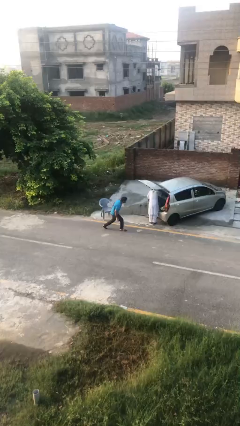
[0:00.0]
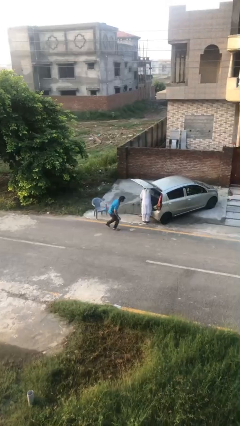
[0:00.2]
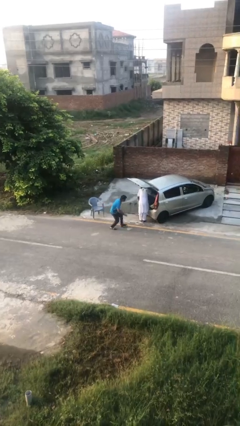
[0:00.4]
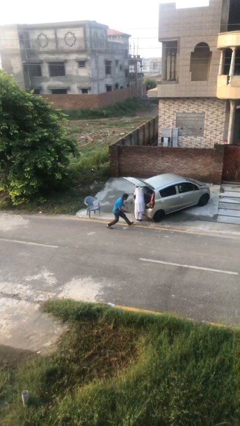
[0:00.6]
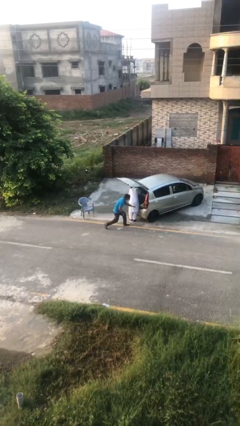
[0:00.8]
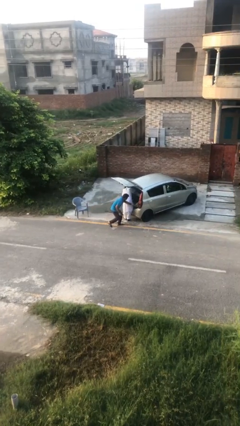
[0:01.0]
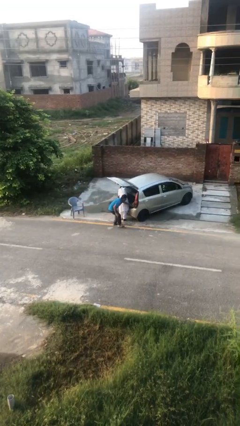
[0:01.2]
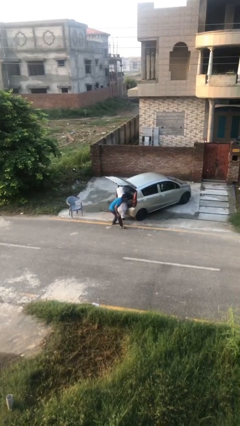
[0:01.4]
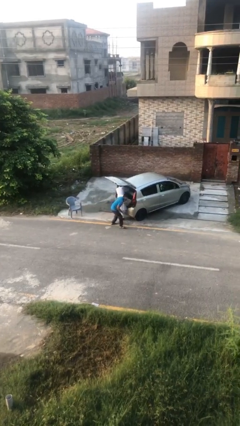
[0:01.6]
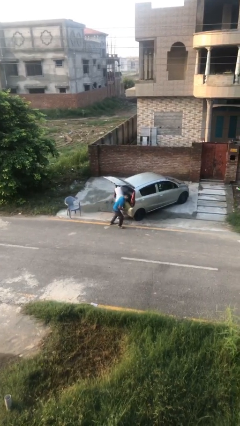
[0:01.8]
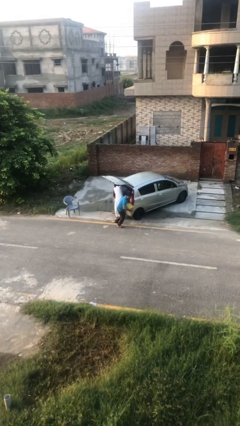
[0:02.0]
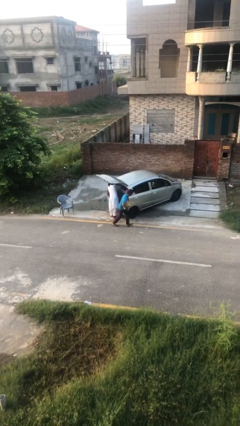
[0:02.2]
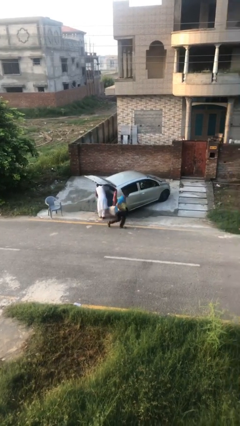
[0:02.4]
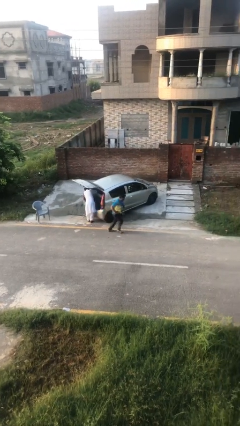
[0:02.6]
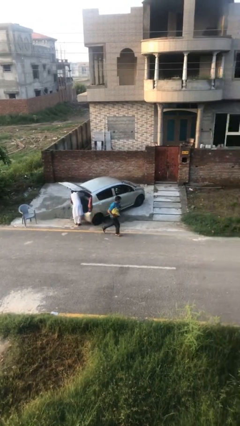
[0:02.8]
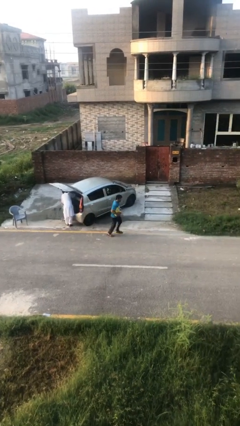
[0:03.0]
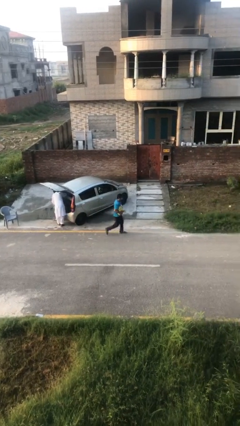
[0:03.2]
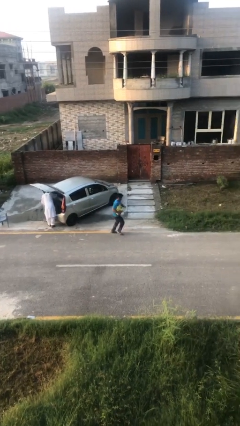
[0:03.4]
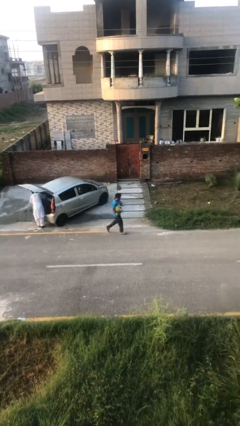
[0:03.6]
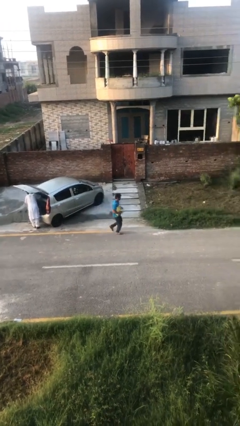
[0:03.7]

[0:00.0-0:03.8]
person steals object from person

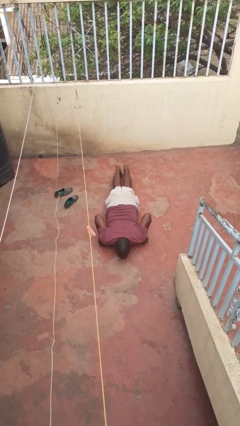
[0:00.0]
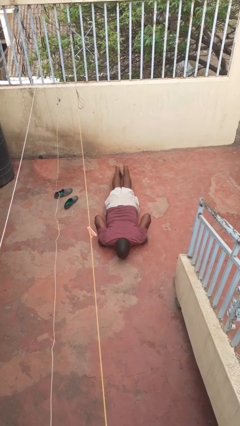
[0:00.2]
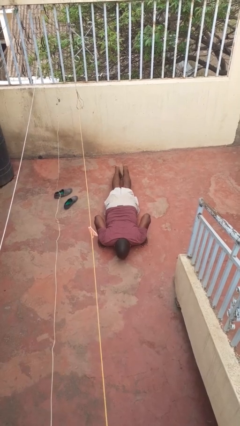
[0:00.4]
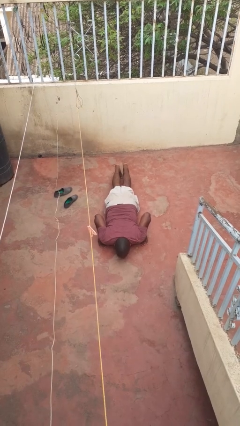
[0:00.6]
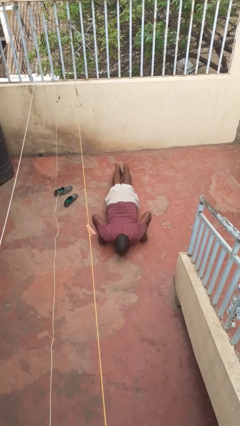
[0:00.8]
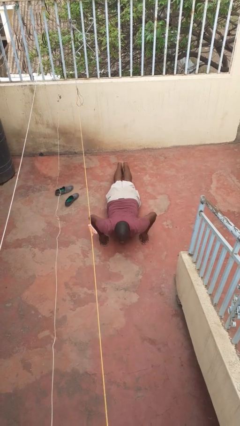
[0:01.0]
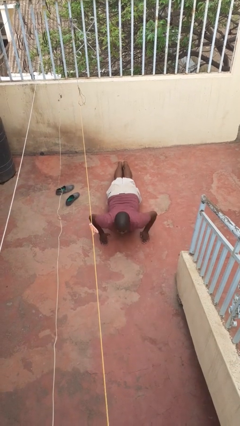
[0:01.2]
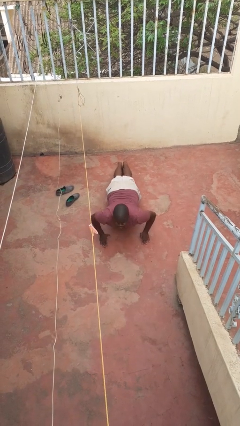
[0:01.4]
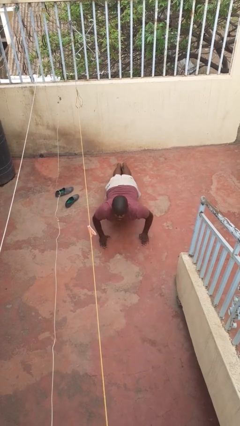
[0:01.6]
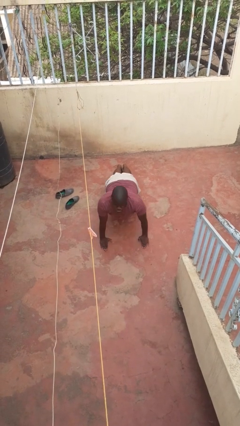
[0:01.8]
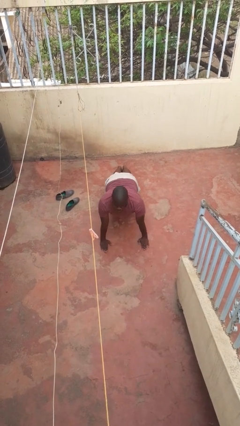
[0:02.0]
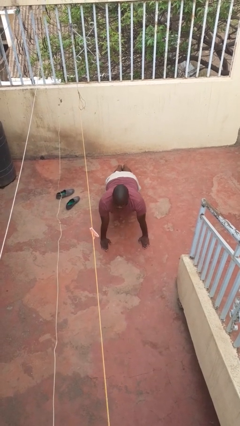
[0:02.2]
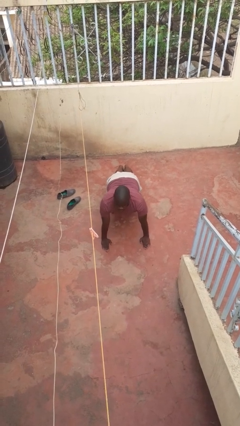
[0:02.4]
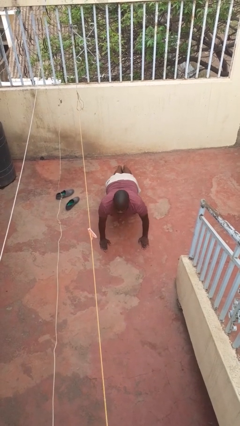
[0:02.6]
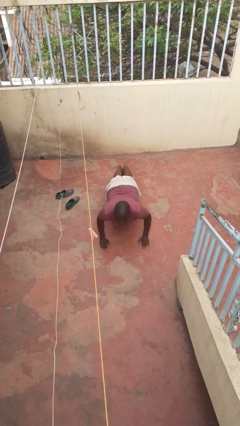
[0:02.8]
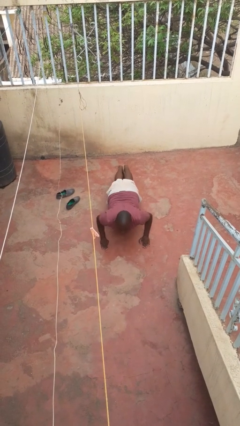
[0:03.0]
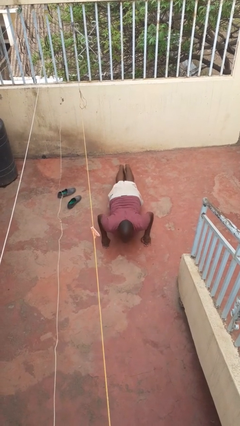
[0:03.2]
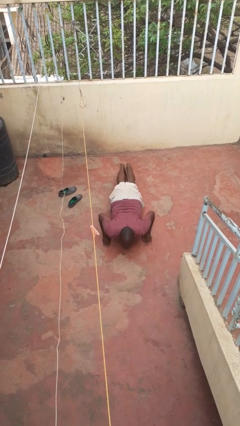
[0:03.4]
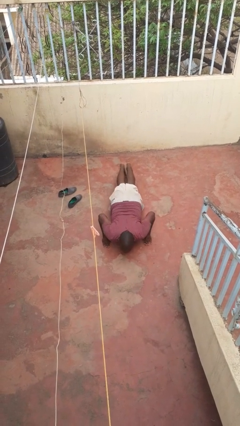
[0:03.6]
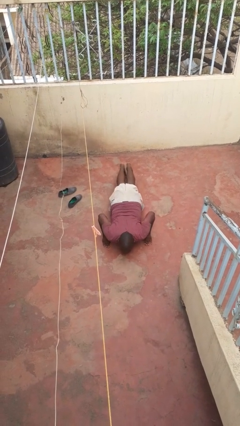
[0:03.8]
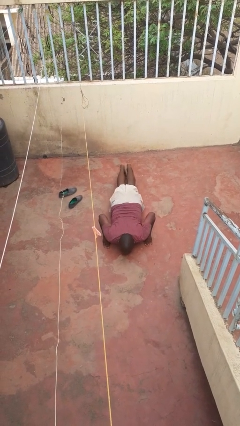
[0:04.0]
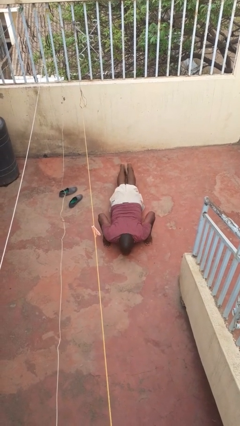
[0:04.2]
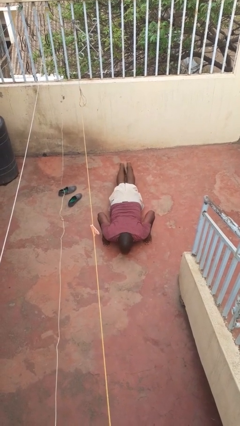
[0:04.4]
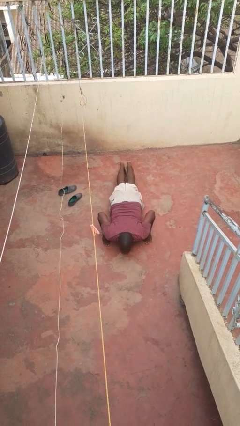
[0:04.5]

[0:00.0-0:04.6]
person exercises with pushup

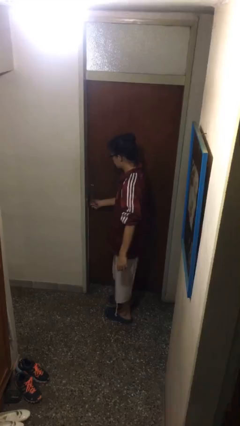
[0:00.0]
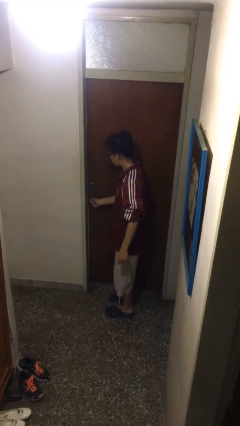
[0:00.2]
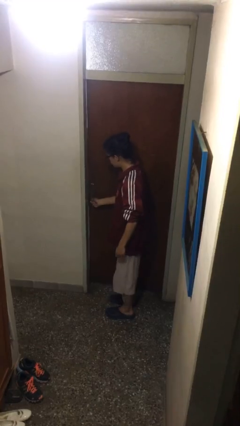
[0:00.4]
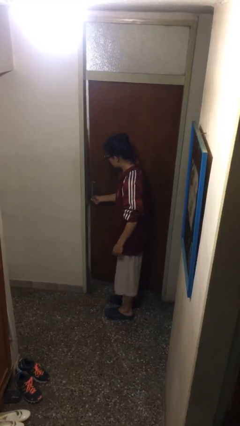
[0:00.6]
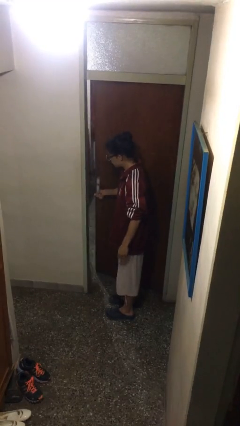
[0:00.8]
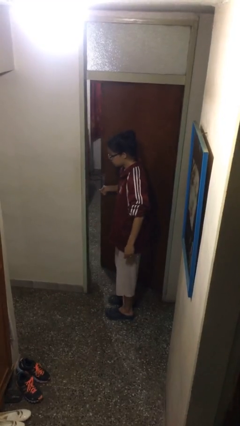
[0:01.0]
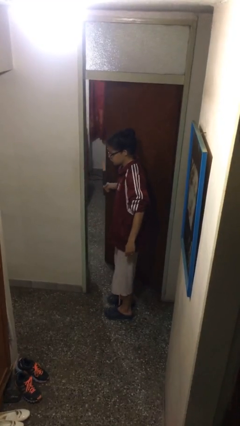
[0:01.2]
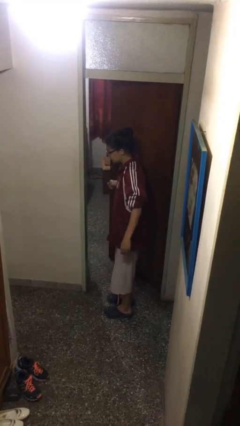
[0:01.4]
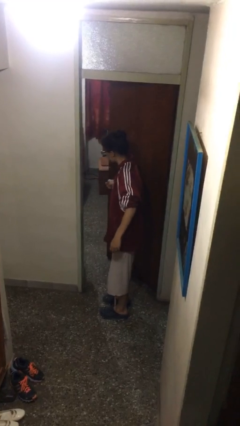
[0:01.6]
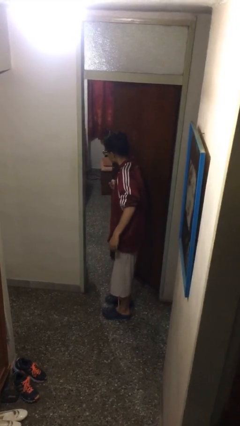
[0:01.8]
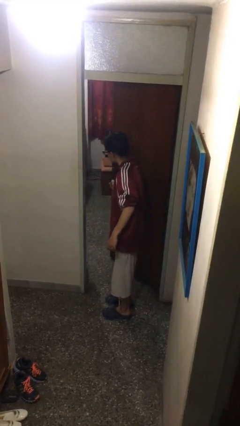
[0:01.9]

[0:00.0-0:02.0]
person opens facility door

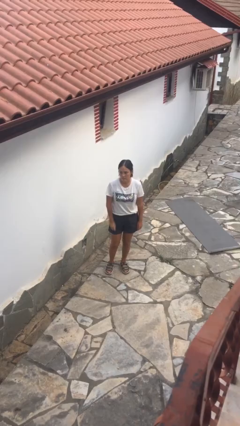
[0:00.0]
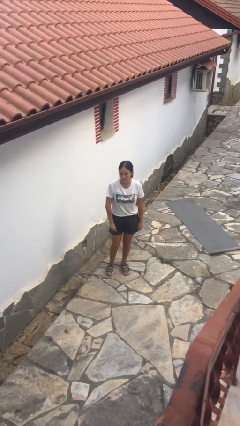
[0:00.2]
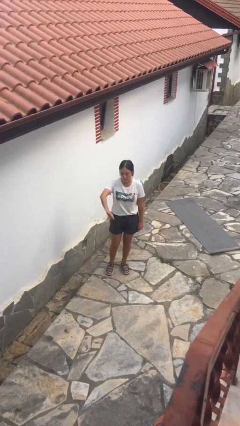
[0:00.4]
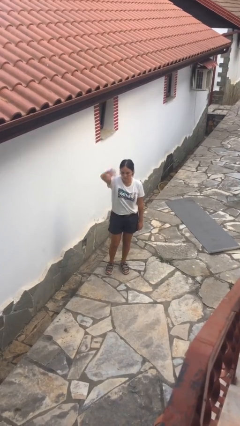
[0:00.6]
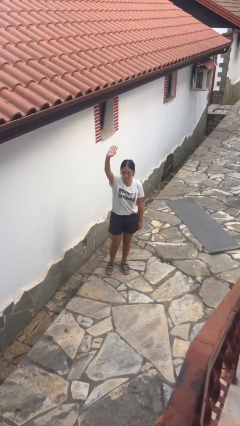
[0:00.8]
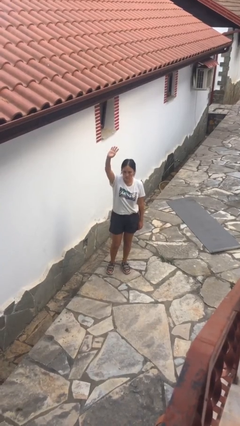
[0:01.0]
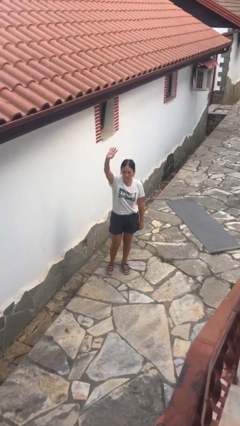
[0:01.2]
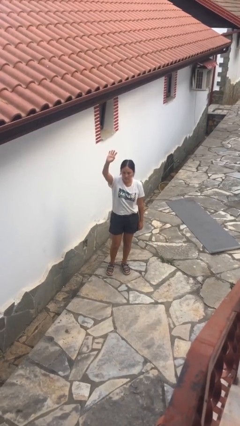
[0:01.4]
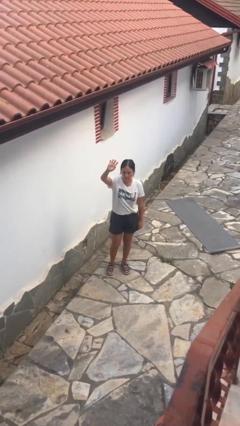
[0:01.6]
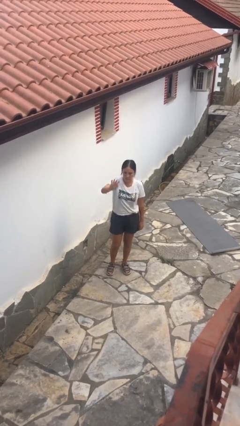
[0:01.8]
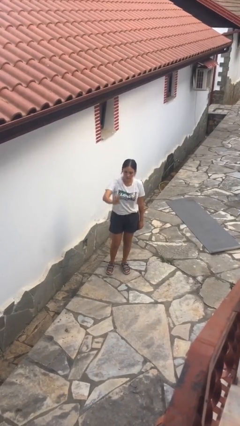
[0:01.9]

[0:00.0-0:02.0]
person gestures swipe up

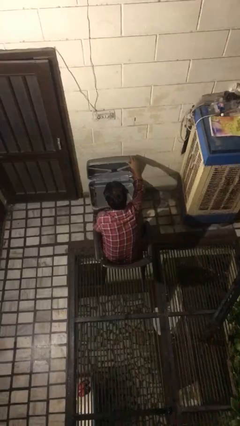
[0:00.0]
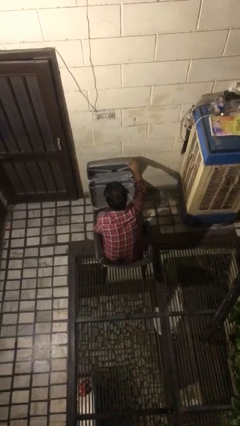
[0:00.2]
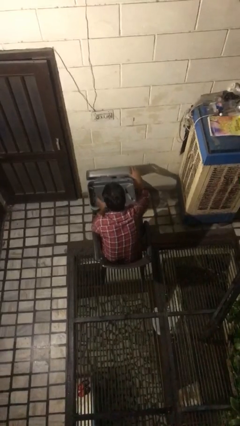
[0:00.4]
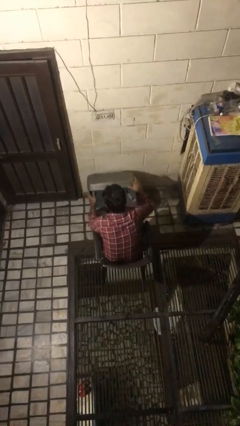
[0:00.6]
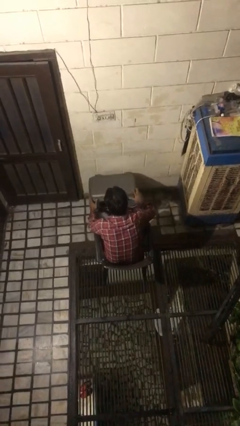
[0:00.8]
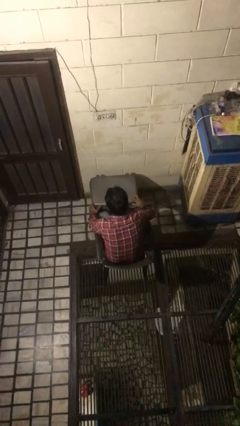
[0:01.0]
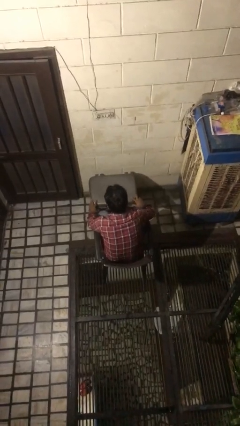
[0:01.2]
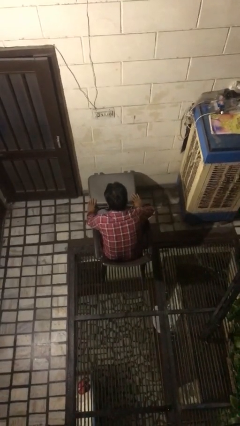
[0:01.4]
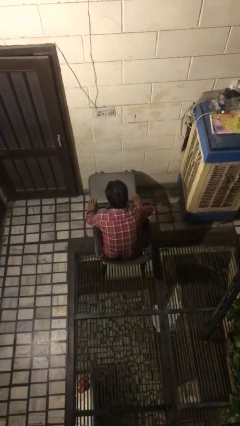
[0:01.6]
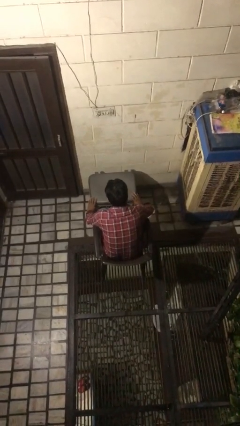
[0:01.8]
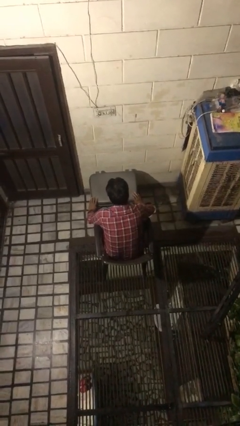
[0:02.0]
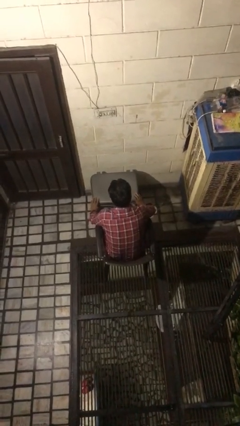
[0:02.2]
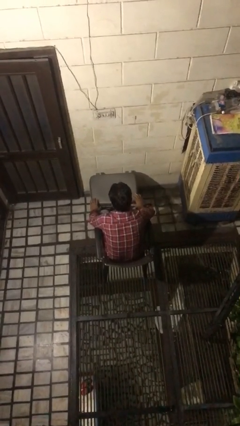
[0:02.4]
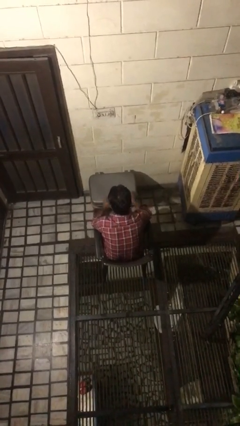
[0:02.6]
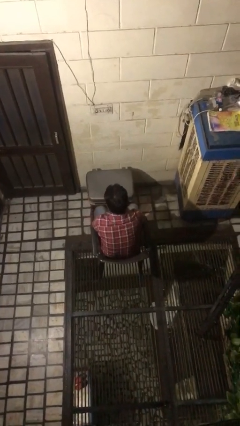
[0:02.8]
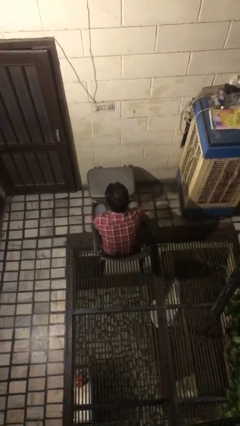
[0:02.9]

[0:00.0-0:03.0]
person closes suitcase

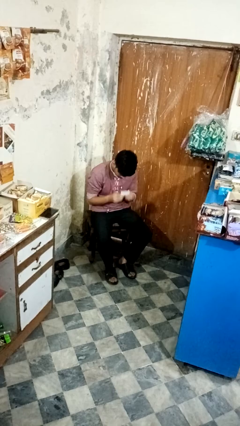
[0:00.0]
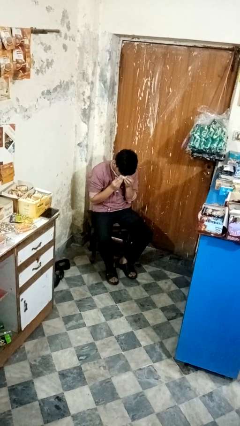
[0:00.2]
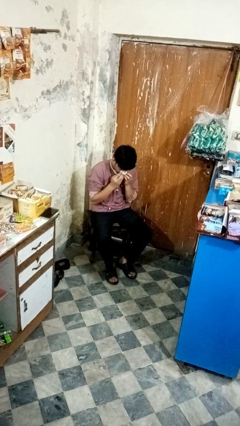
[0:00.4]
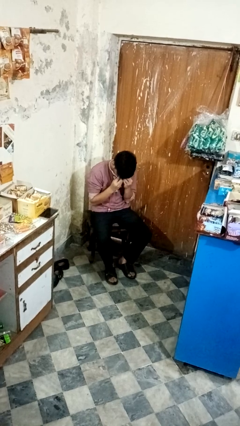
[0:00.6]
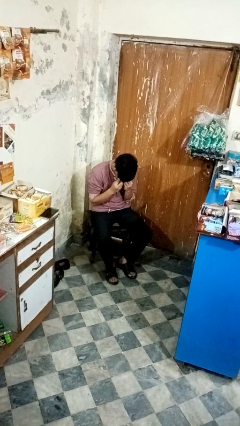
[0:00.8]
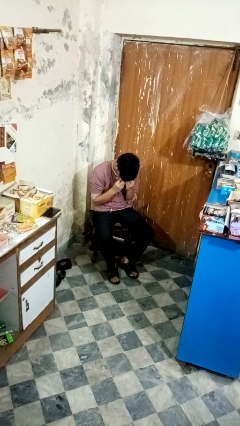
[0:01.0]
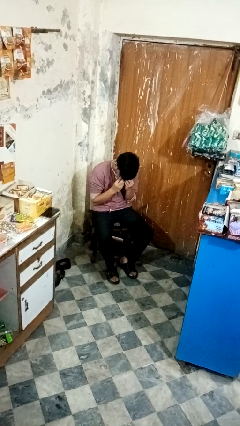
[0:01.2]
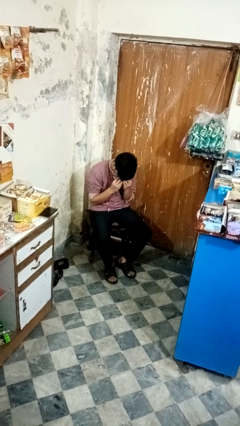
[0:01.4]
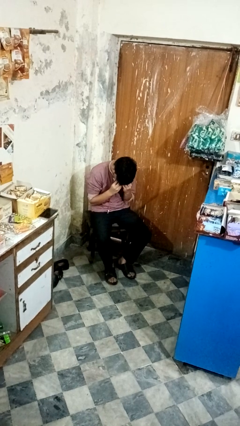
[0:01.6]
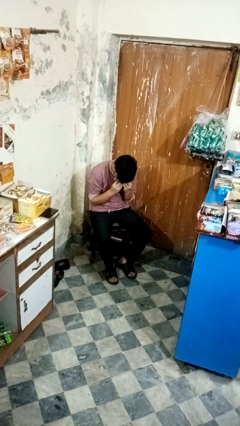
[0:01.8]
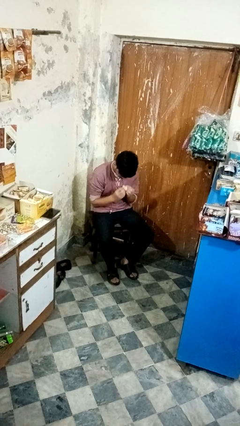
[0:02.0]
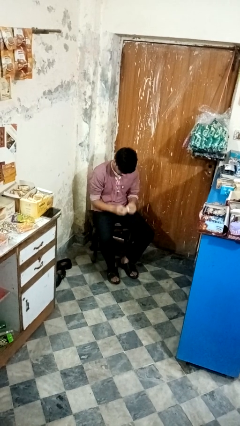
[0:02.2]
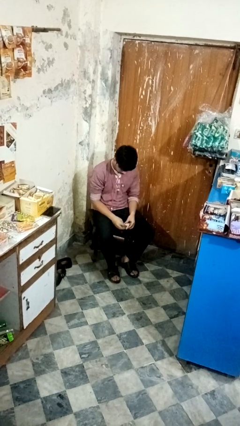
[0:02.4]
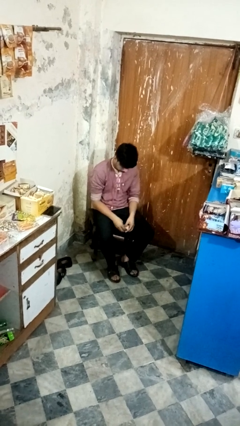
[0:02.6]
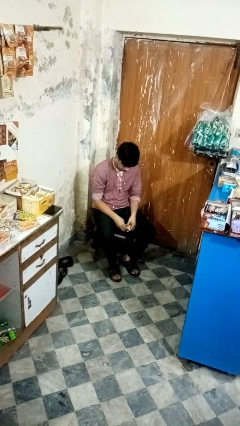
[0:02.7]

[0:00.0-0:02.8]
person blows nose
